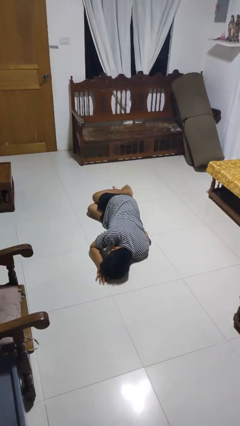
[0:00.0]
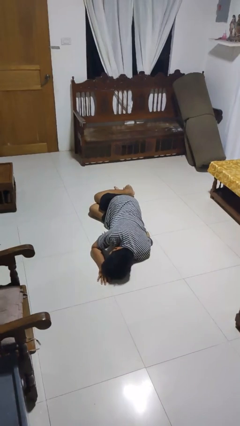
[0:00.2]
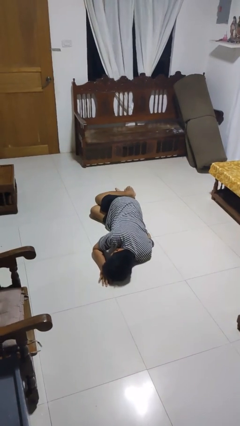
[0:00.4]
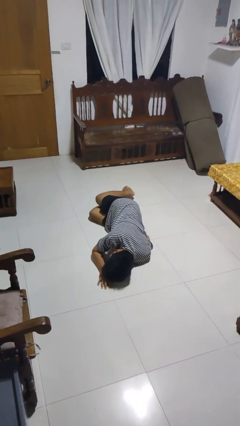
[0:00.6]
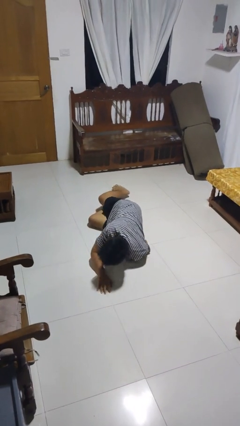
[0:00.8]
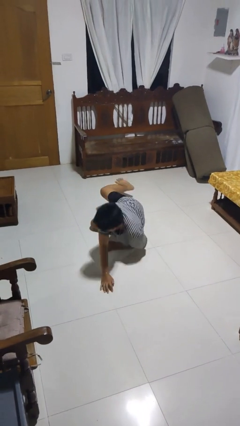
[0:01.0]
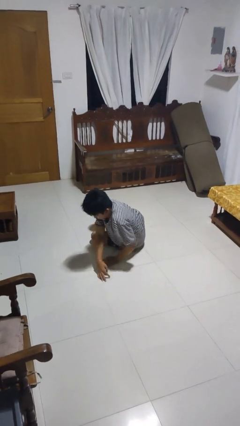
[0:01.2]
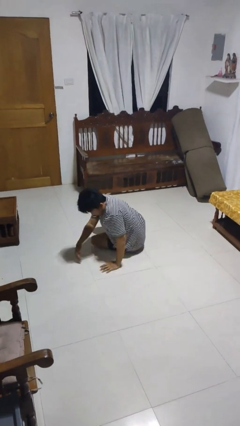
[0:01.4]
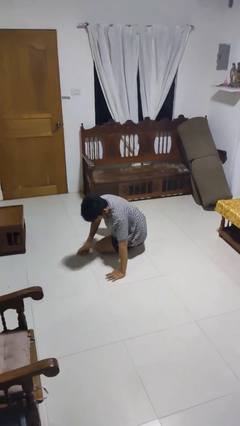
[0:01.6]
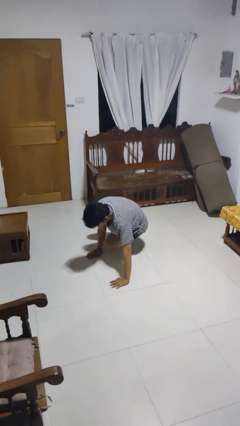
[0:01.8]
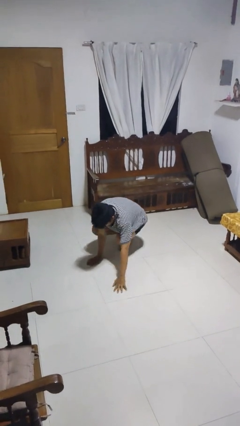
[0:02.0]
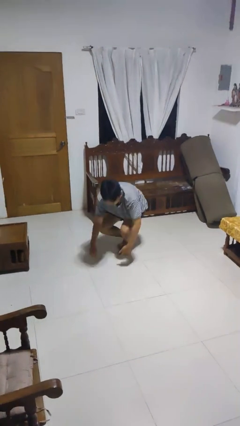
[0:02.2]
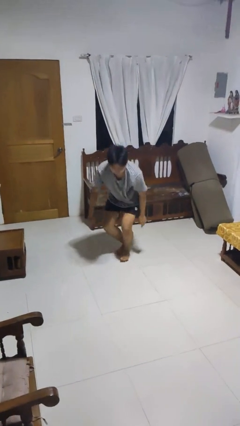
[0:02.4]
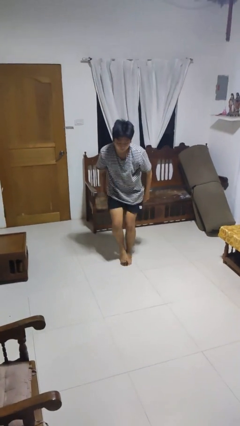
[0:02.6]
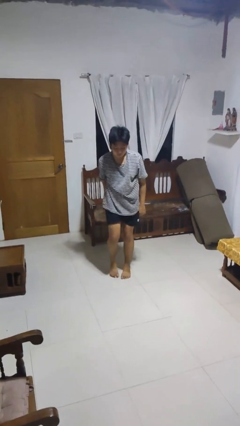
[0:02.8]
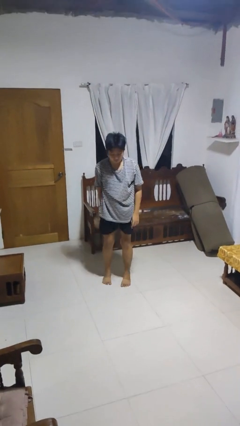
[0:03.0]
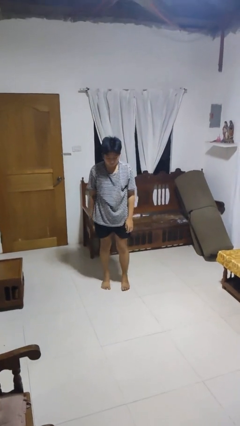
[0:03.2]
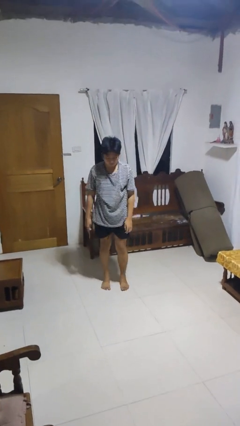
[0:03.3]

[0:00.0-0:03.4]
person stands up from floor

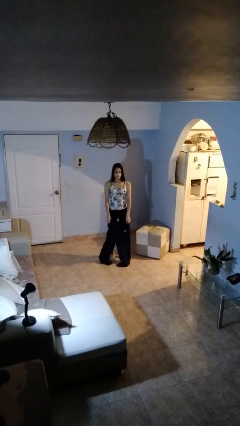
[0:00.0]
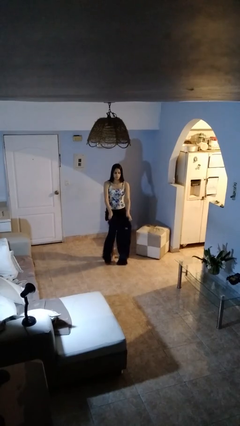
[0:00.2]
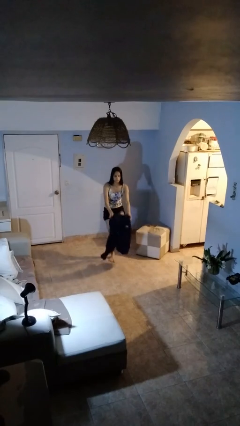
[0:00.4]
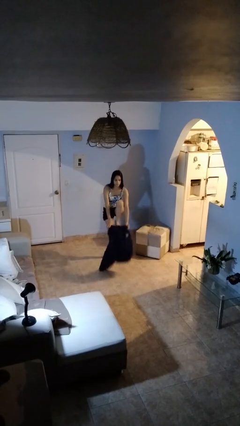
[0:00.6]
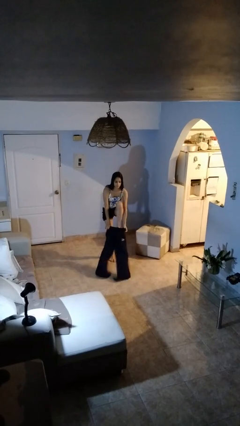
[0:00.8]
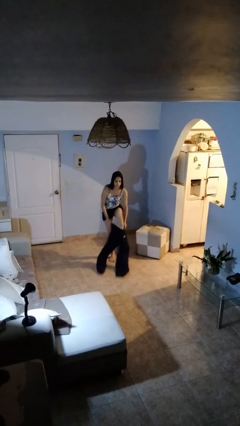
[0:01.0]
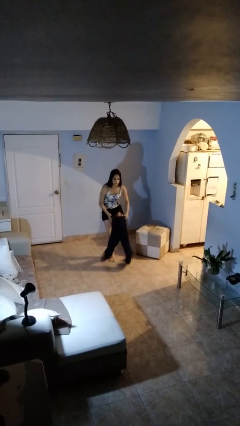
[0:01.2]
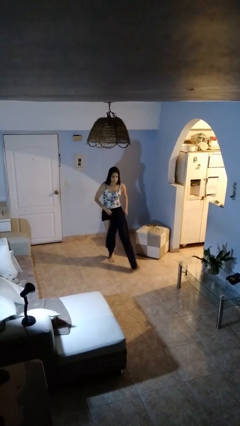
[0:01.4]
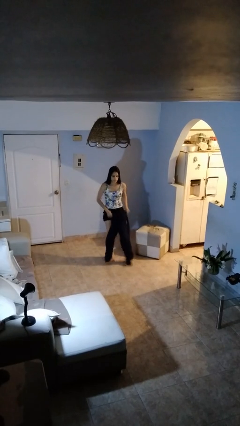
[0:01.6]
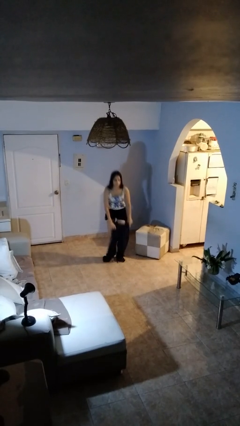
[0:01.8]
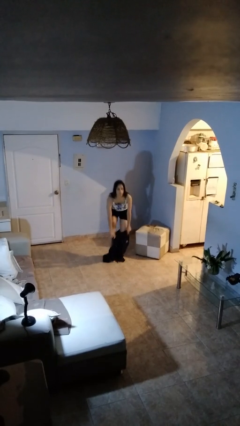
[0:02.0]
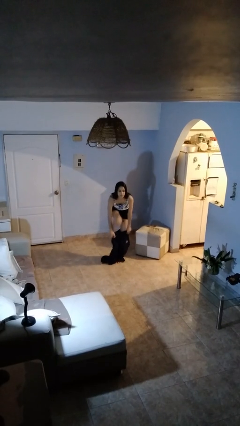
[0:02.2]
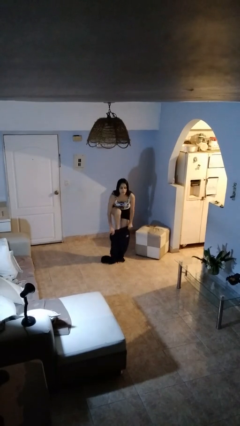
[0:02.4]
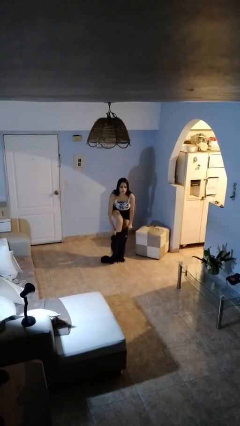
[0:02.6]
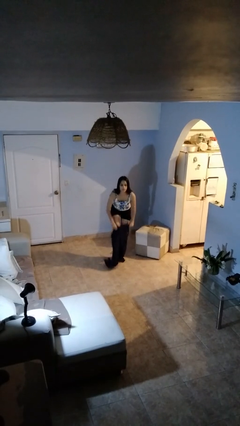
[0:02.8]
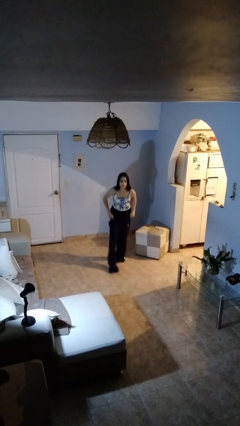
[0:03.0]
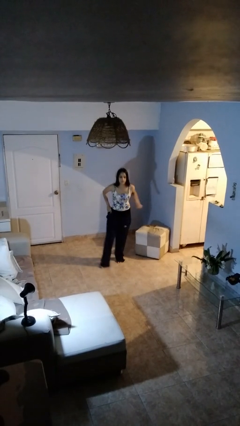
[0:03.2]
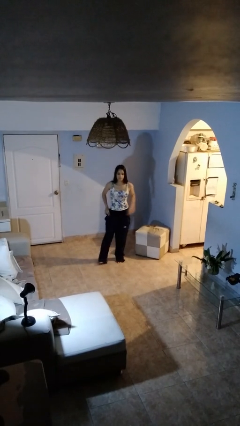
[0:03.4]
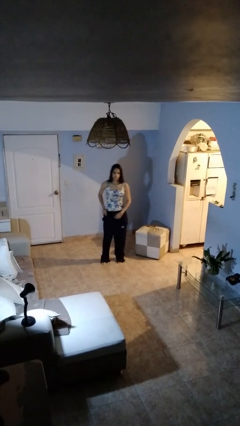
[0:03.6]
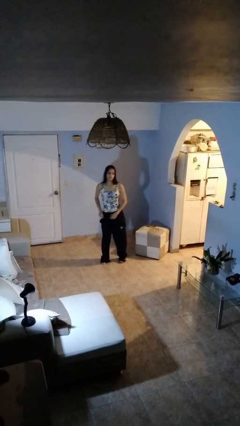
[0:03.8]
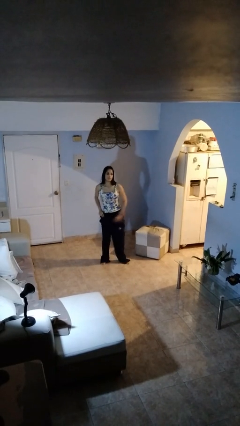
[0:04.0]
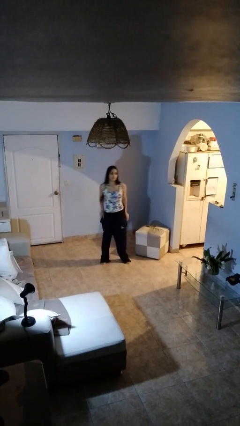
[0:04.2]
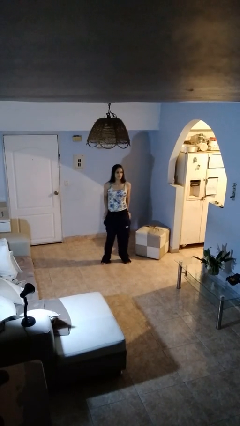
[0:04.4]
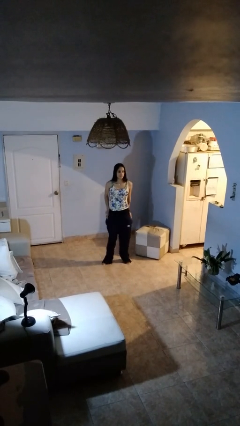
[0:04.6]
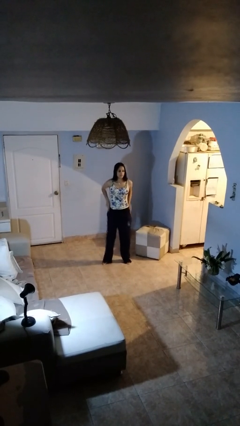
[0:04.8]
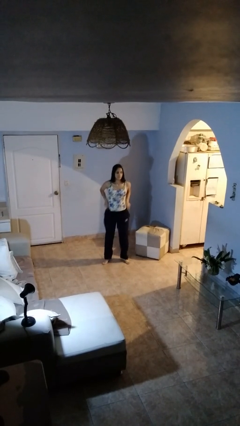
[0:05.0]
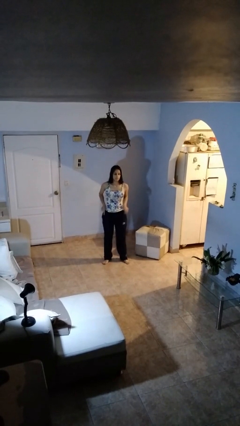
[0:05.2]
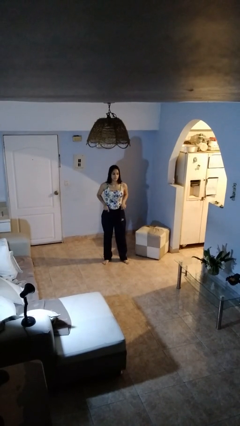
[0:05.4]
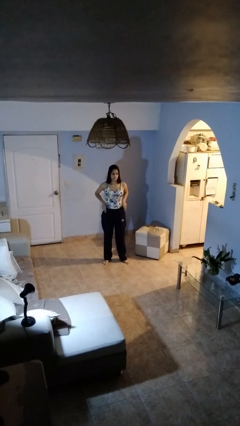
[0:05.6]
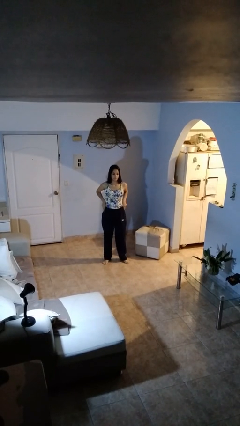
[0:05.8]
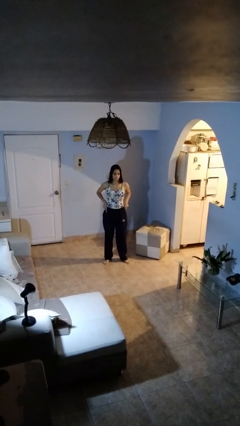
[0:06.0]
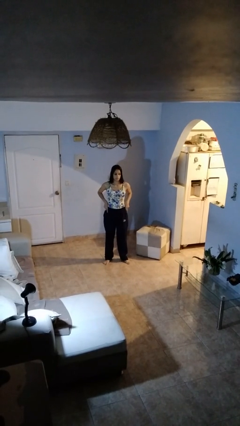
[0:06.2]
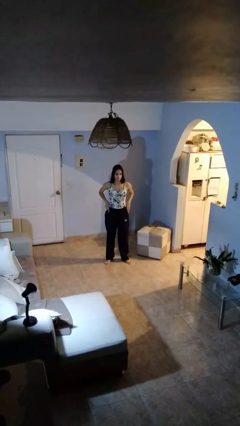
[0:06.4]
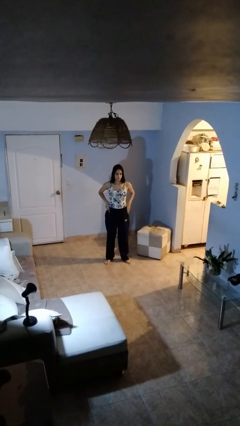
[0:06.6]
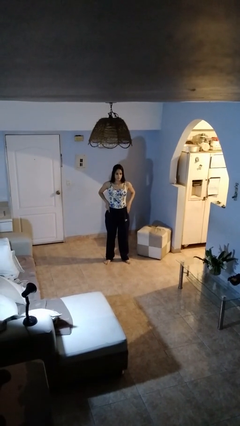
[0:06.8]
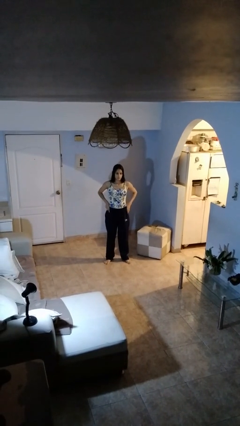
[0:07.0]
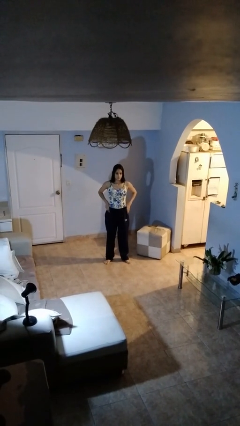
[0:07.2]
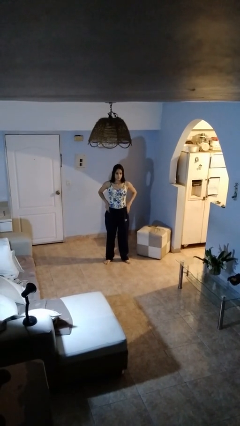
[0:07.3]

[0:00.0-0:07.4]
person takes off pants

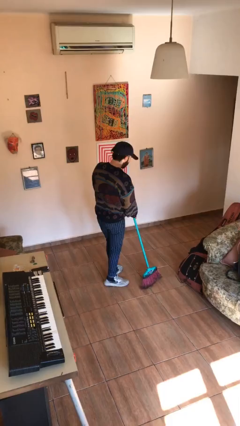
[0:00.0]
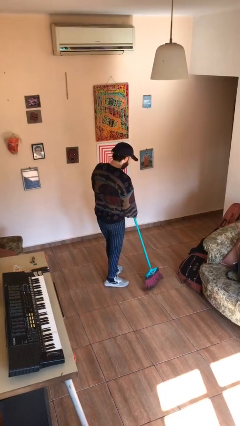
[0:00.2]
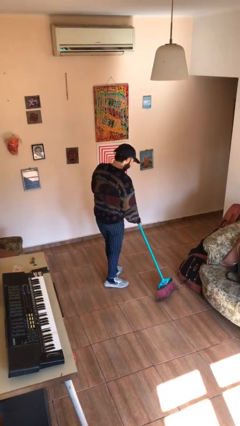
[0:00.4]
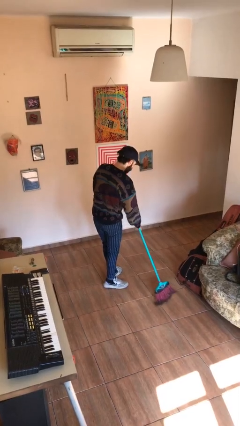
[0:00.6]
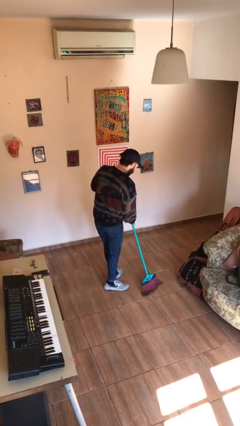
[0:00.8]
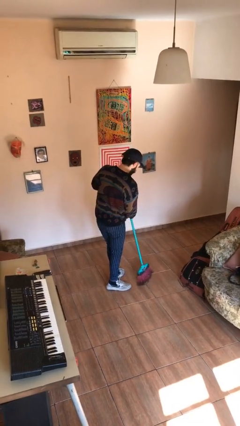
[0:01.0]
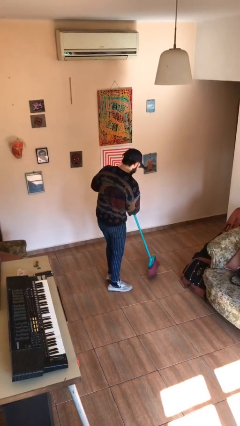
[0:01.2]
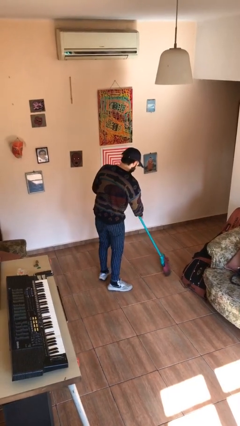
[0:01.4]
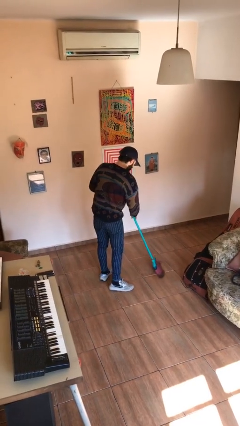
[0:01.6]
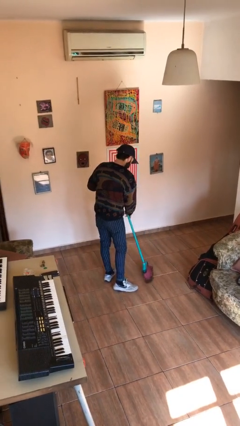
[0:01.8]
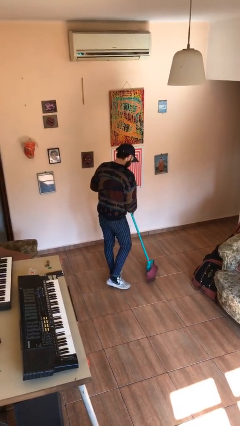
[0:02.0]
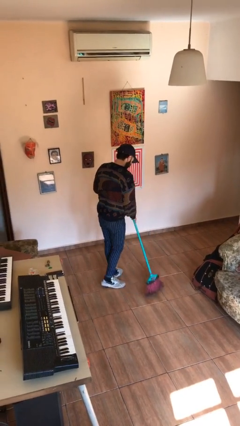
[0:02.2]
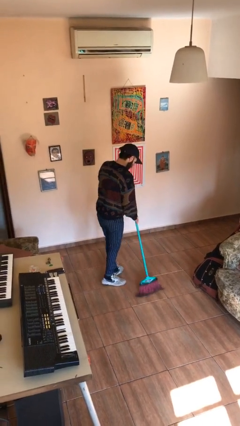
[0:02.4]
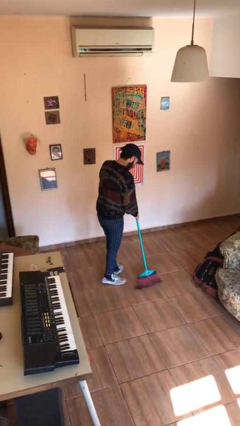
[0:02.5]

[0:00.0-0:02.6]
person sweeps floor

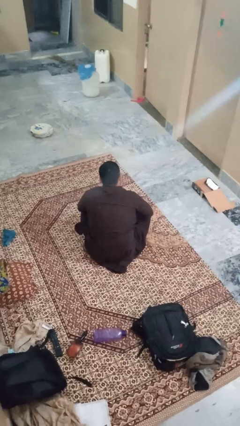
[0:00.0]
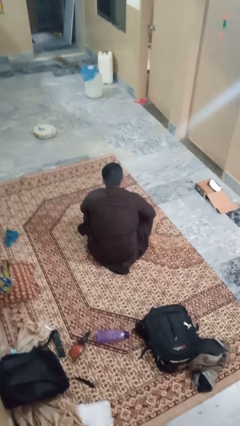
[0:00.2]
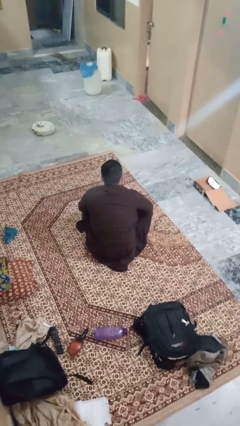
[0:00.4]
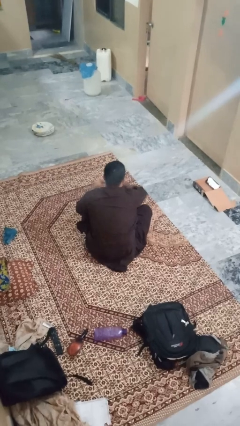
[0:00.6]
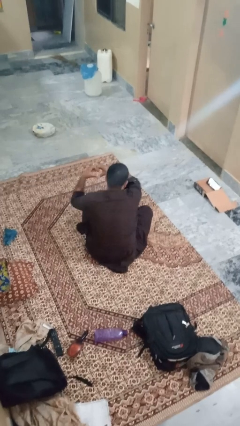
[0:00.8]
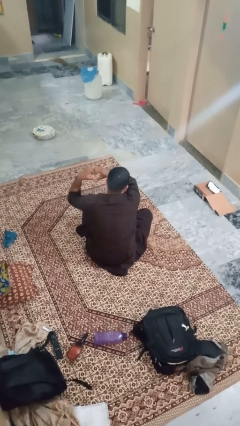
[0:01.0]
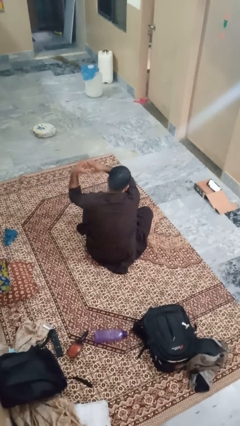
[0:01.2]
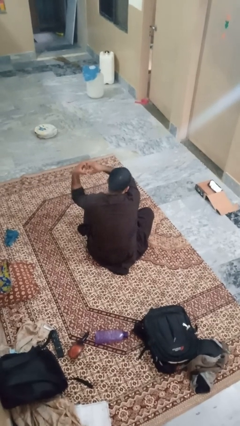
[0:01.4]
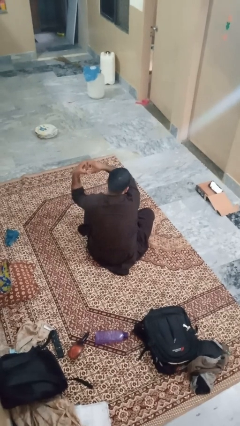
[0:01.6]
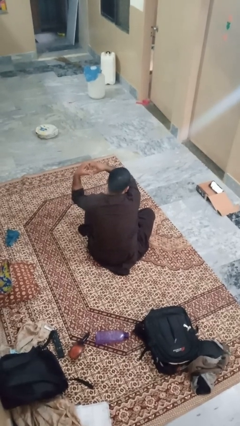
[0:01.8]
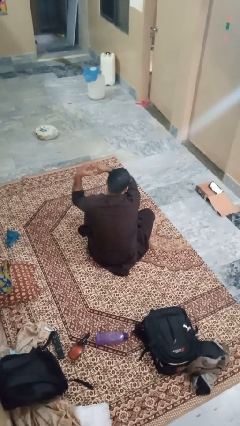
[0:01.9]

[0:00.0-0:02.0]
person gestures heart

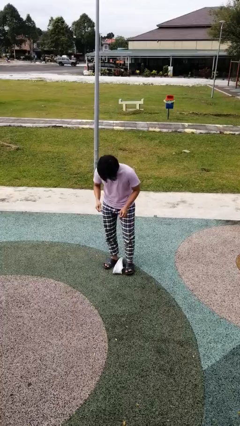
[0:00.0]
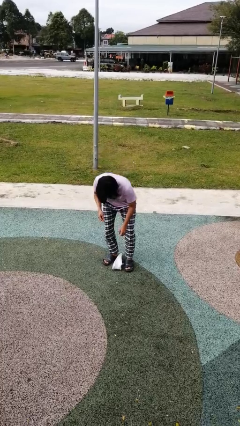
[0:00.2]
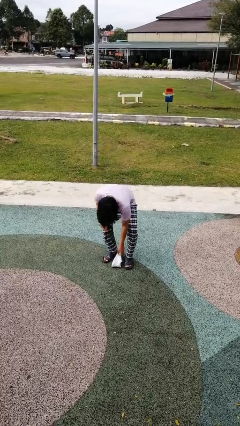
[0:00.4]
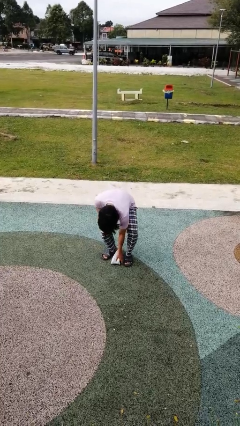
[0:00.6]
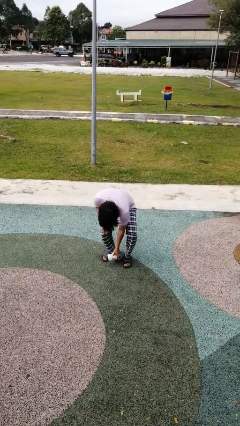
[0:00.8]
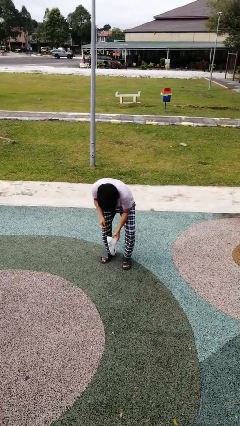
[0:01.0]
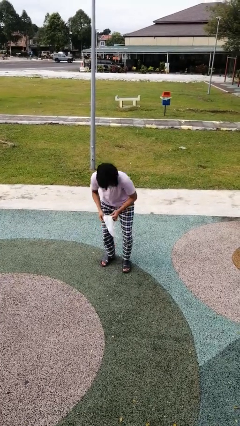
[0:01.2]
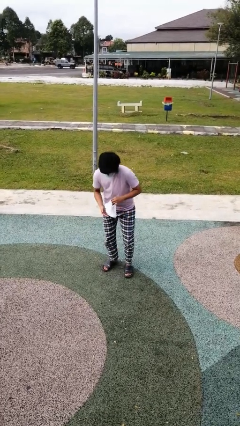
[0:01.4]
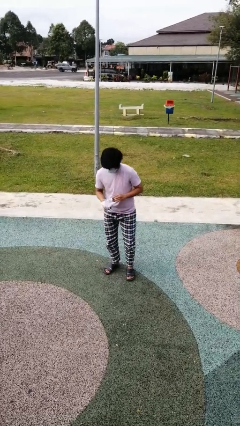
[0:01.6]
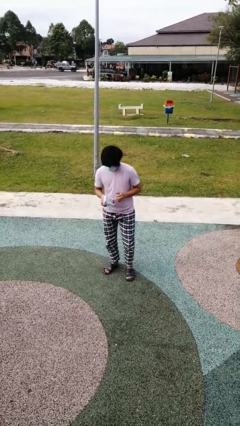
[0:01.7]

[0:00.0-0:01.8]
person picks up object from floor
